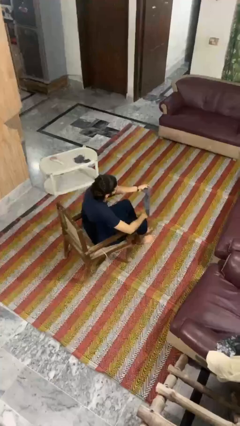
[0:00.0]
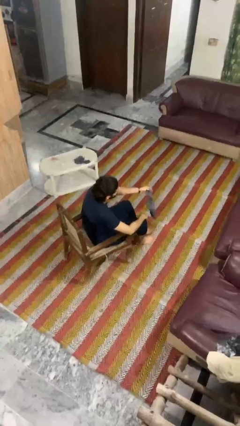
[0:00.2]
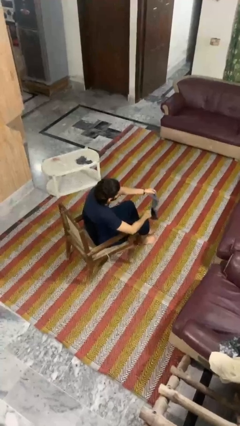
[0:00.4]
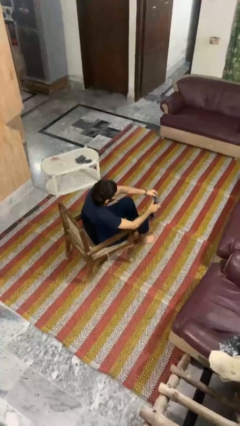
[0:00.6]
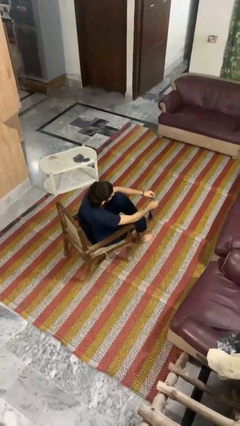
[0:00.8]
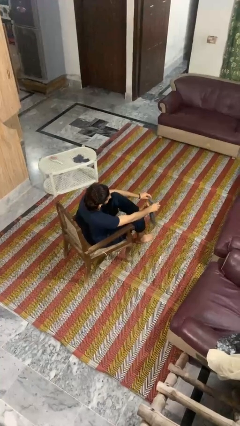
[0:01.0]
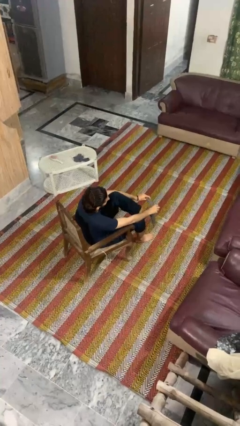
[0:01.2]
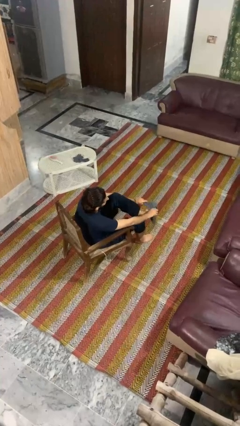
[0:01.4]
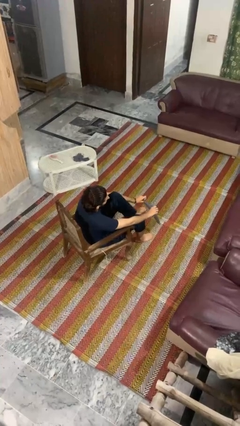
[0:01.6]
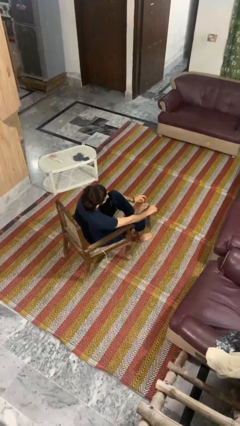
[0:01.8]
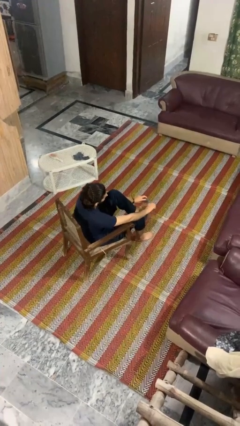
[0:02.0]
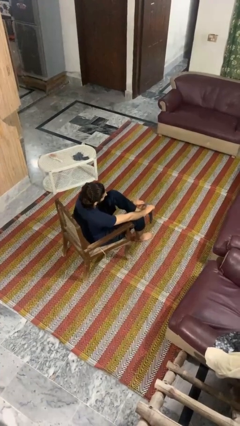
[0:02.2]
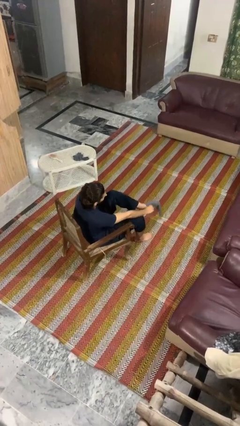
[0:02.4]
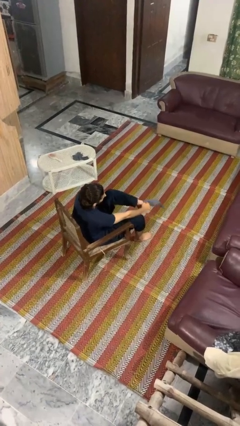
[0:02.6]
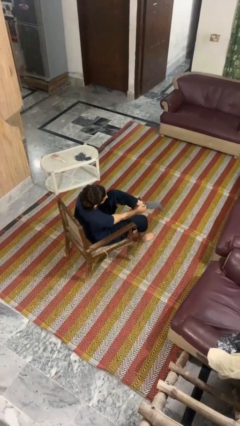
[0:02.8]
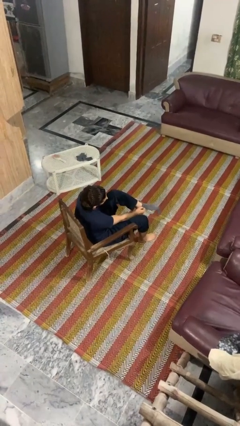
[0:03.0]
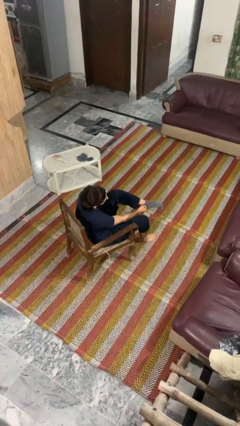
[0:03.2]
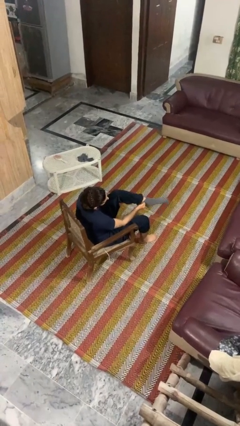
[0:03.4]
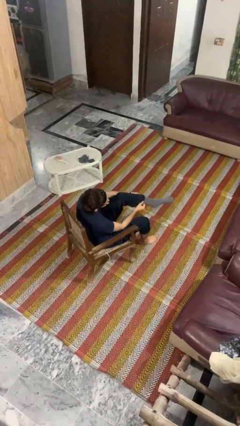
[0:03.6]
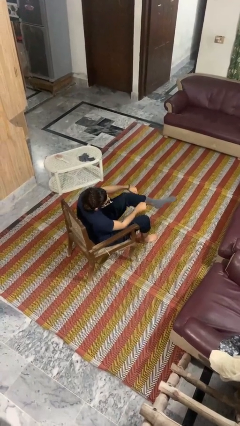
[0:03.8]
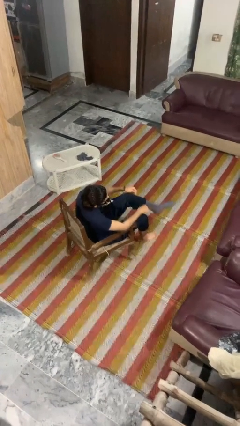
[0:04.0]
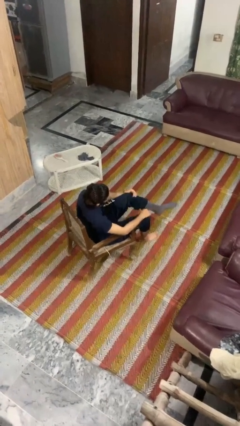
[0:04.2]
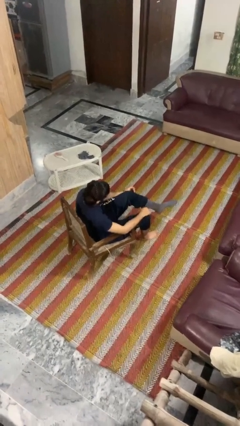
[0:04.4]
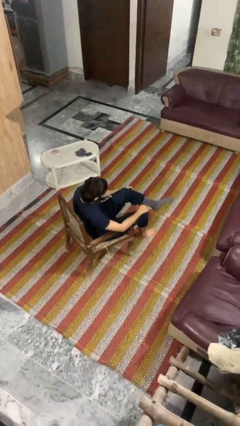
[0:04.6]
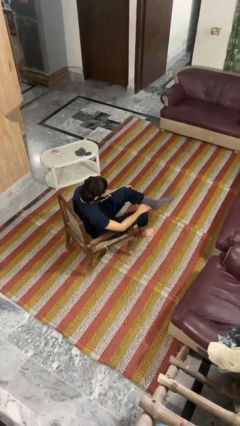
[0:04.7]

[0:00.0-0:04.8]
person puts on socks

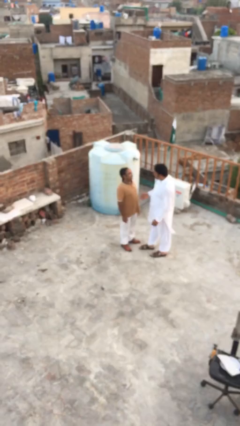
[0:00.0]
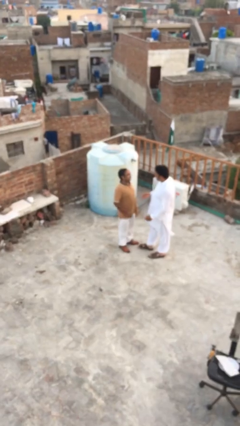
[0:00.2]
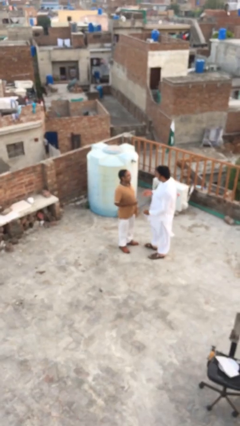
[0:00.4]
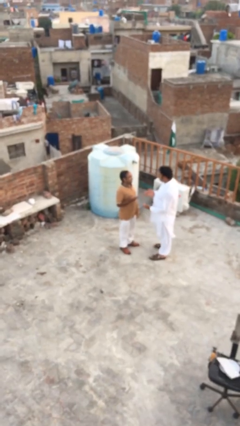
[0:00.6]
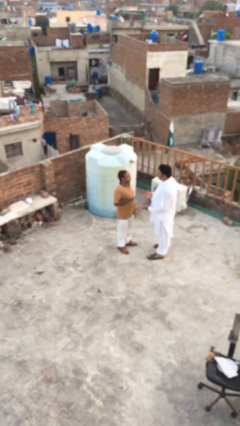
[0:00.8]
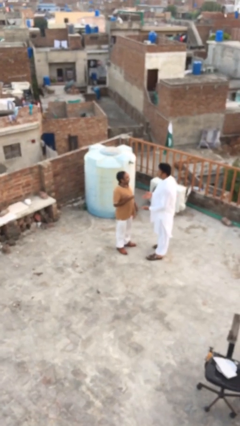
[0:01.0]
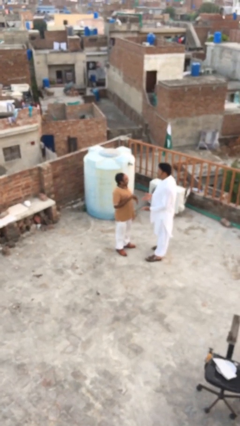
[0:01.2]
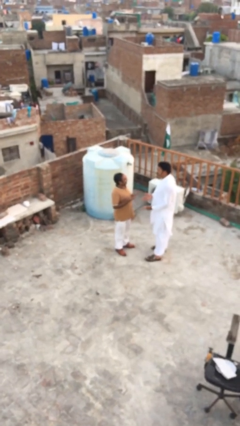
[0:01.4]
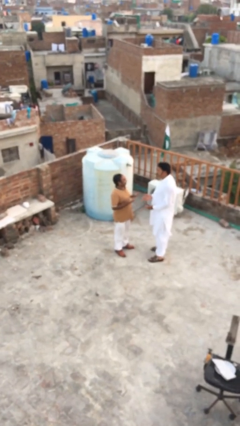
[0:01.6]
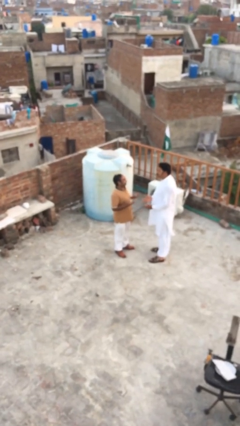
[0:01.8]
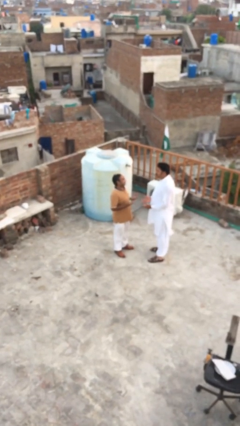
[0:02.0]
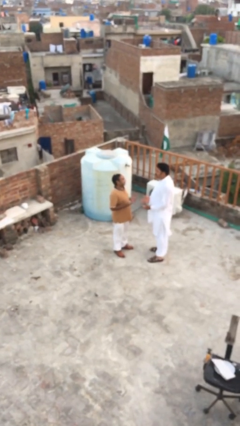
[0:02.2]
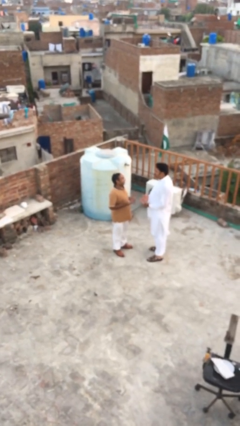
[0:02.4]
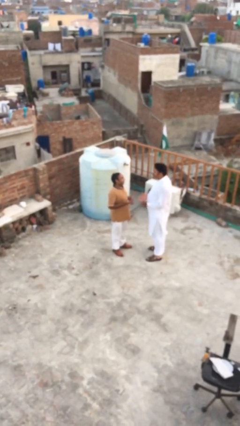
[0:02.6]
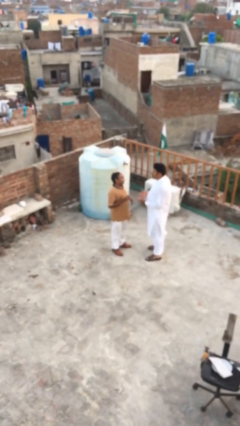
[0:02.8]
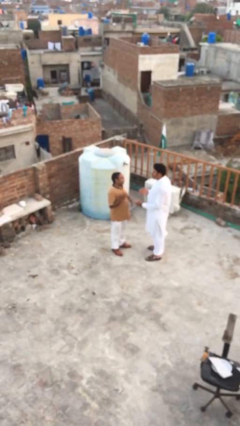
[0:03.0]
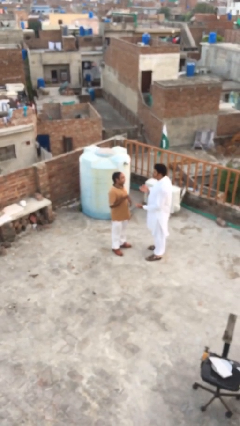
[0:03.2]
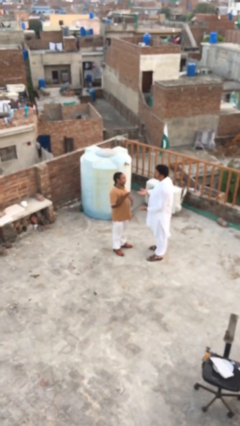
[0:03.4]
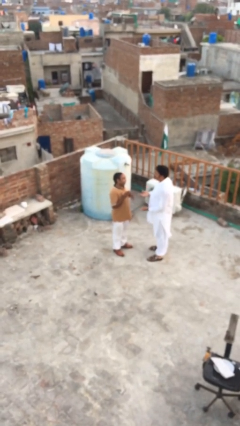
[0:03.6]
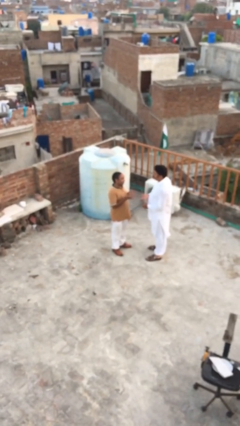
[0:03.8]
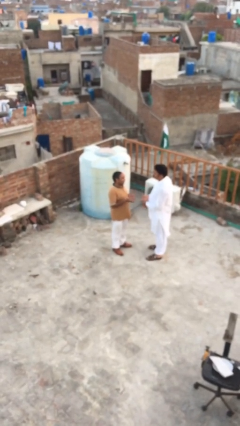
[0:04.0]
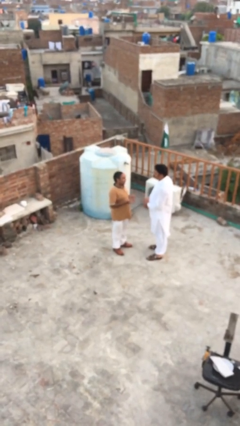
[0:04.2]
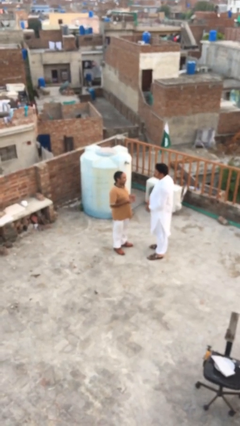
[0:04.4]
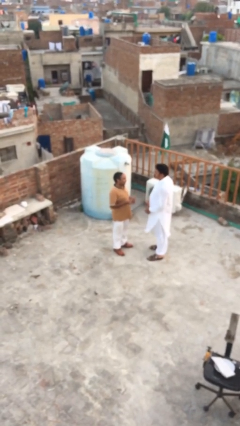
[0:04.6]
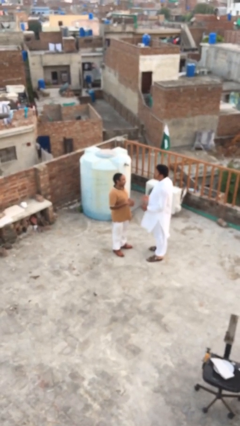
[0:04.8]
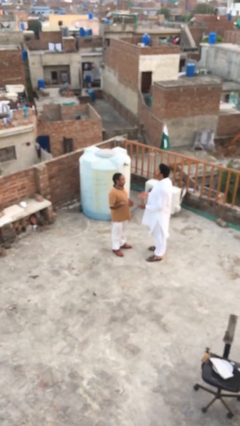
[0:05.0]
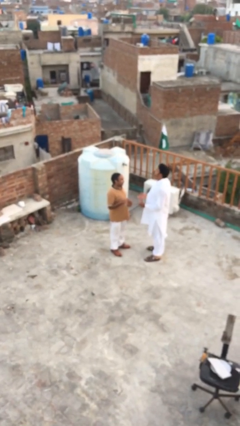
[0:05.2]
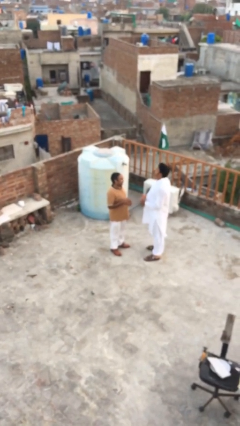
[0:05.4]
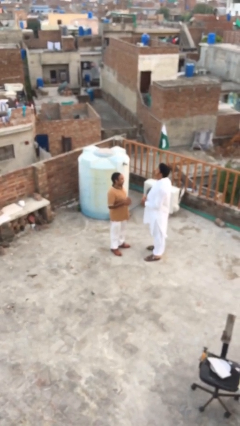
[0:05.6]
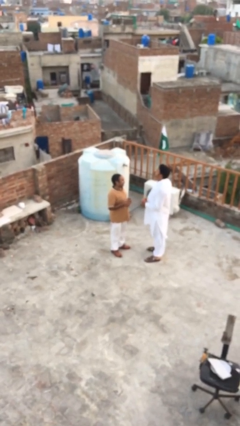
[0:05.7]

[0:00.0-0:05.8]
person talks to person

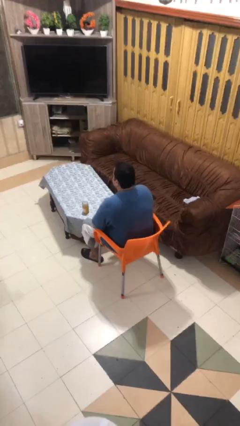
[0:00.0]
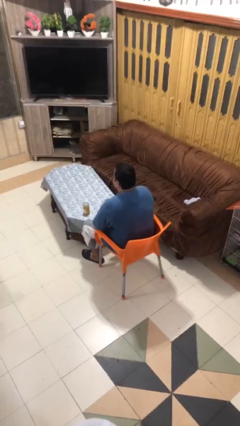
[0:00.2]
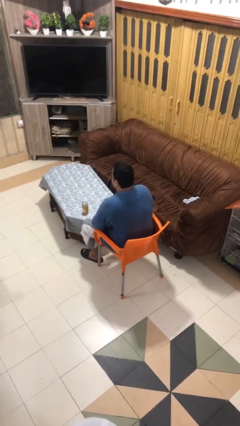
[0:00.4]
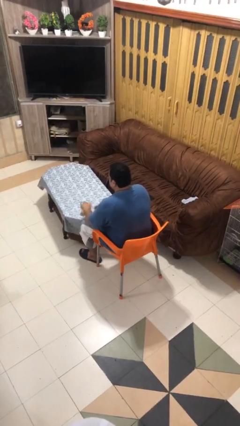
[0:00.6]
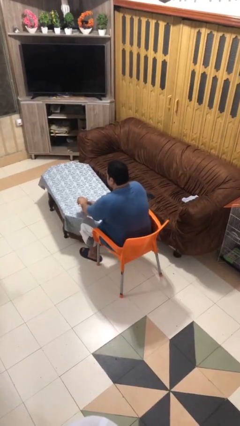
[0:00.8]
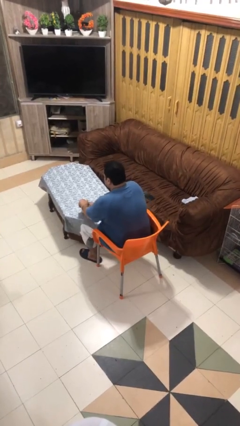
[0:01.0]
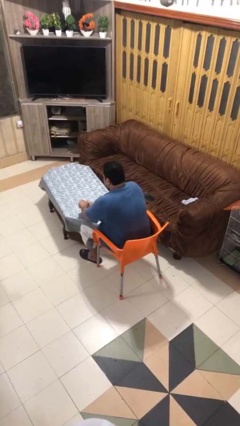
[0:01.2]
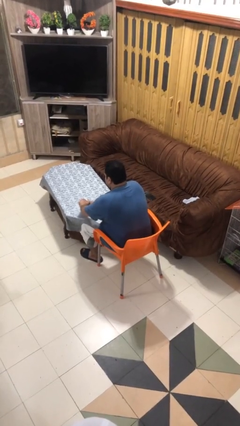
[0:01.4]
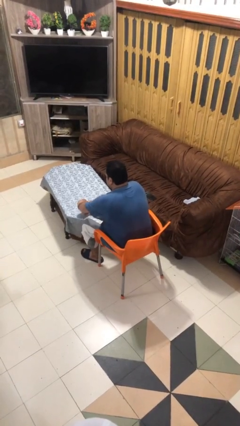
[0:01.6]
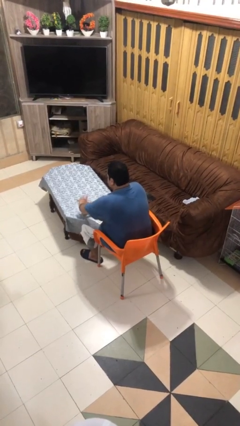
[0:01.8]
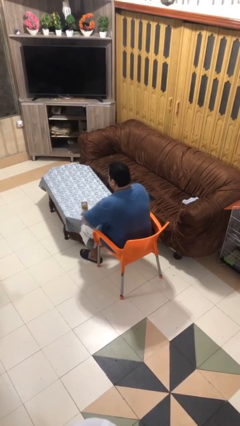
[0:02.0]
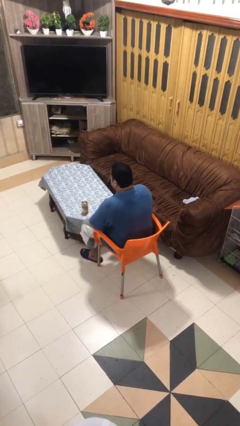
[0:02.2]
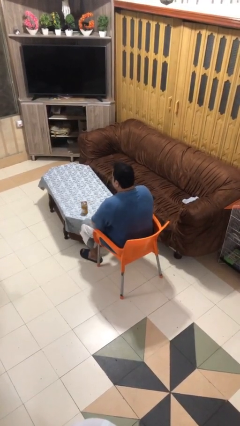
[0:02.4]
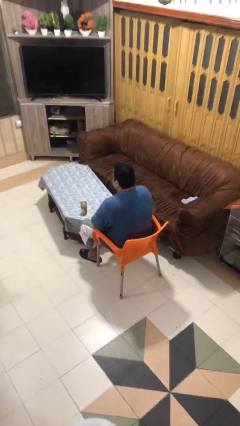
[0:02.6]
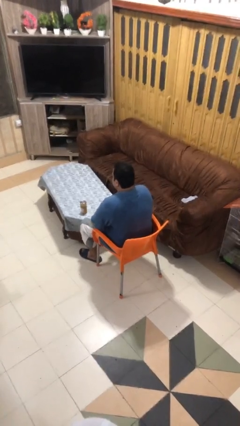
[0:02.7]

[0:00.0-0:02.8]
person closes jar

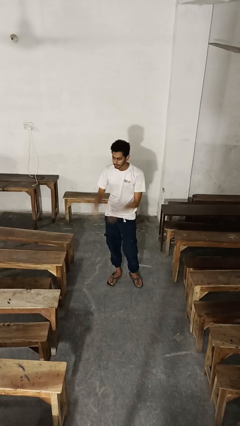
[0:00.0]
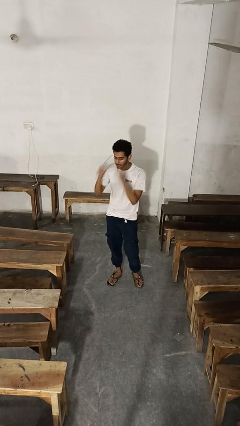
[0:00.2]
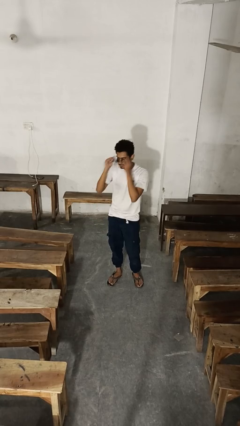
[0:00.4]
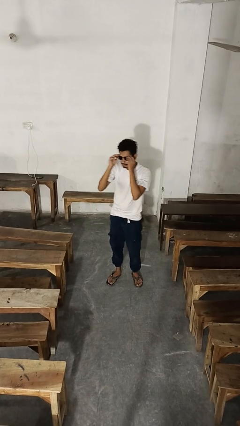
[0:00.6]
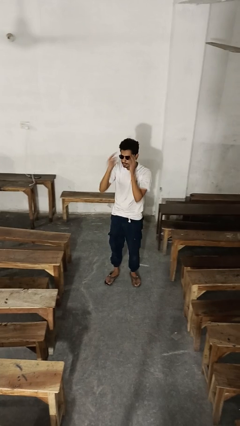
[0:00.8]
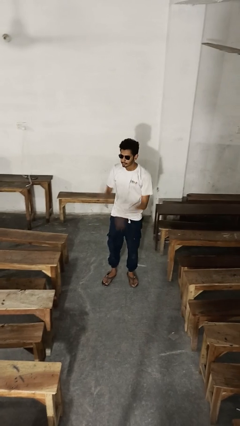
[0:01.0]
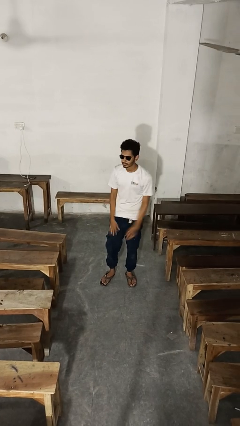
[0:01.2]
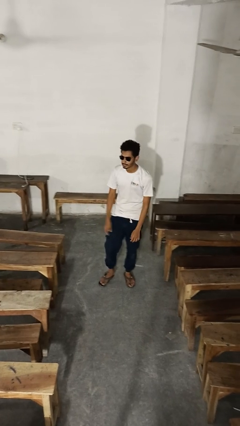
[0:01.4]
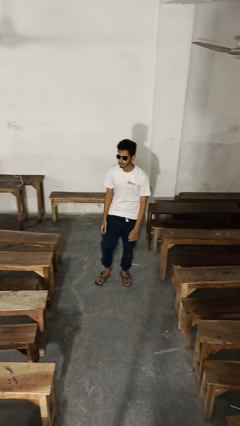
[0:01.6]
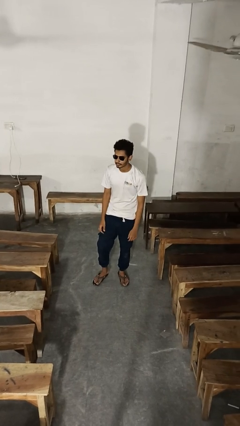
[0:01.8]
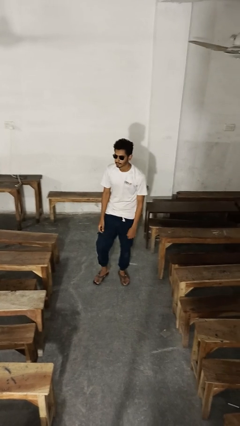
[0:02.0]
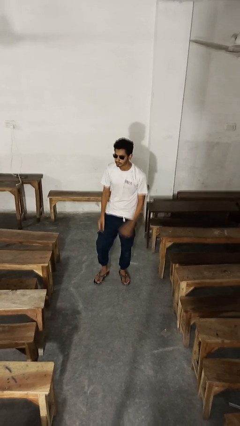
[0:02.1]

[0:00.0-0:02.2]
person puts on sunglasses

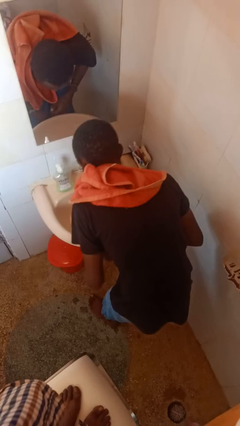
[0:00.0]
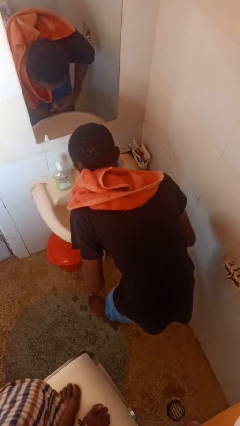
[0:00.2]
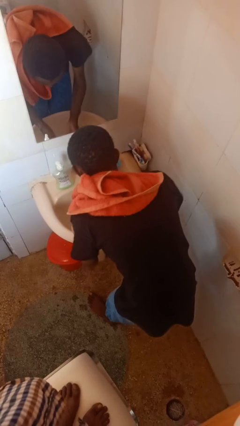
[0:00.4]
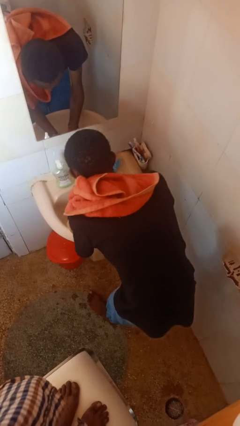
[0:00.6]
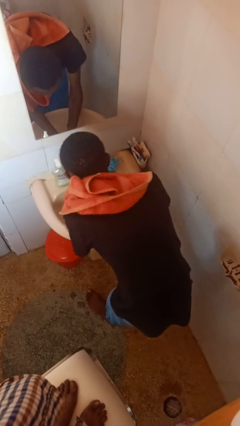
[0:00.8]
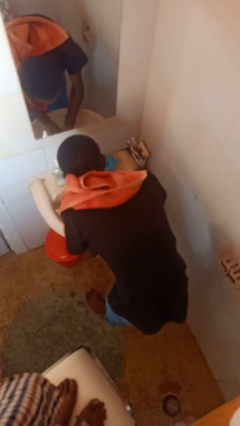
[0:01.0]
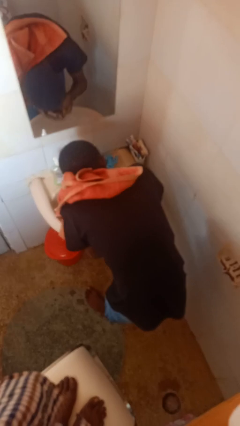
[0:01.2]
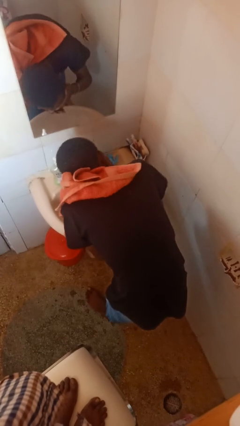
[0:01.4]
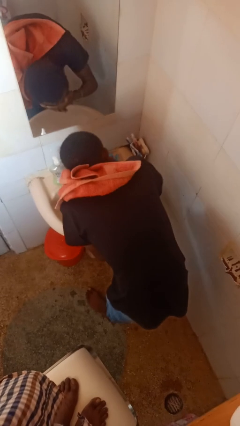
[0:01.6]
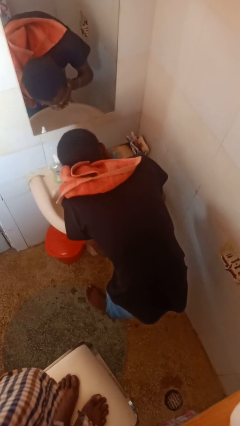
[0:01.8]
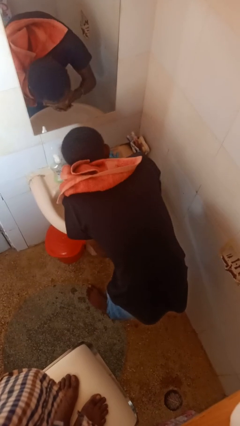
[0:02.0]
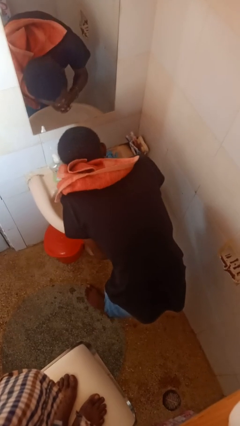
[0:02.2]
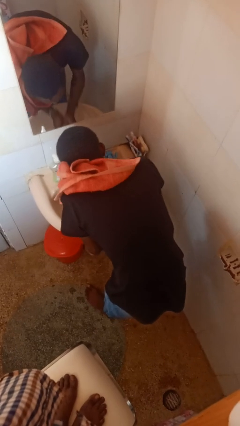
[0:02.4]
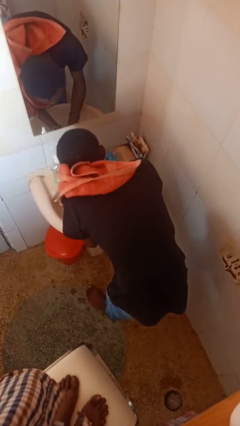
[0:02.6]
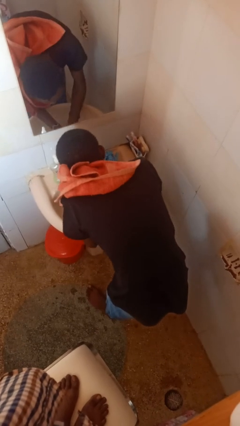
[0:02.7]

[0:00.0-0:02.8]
person washes face
